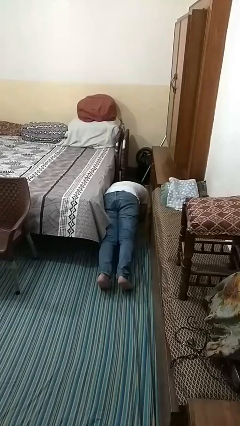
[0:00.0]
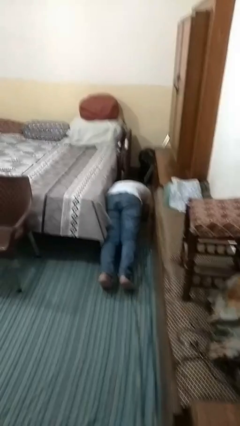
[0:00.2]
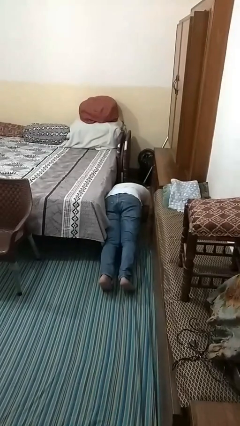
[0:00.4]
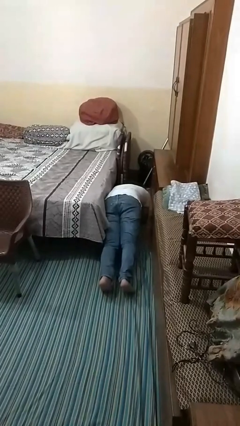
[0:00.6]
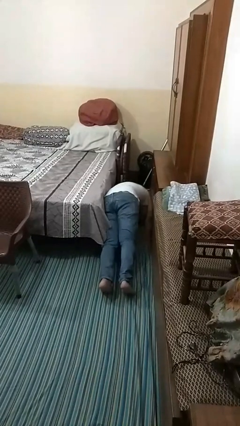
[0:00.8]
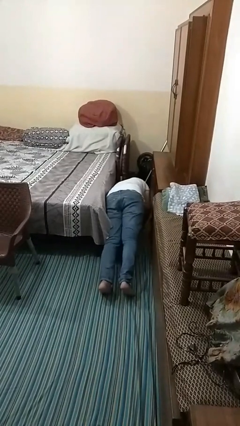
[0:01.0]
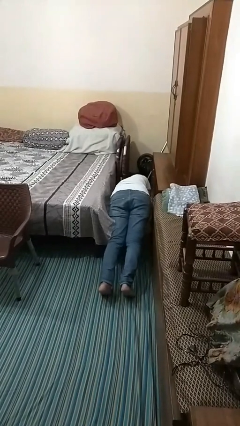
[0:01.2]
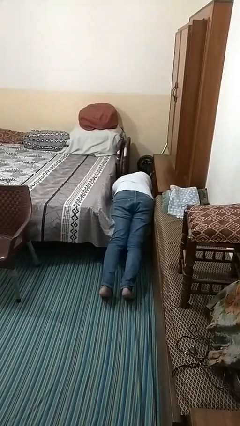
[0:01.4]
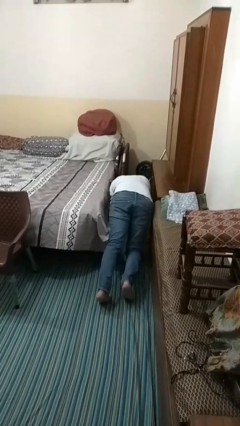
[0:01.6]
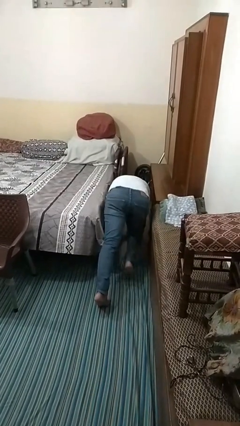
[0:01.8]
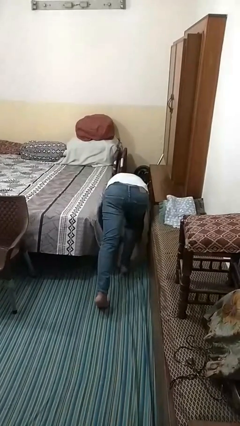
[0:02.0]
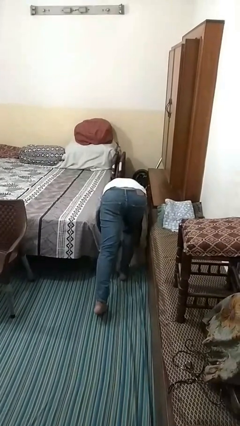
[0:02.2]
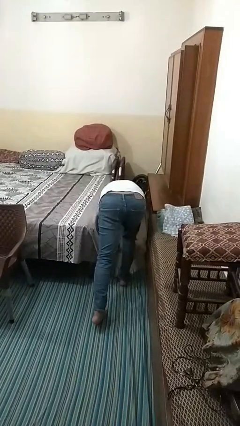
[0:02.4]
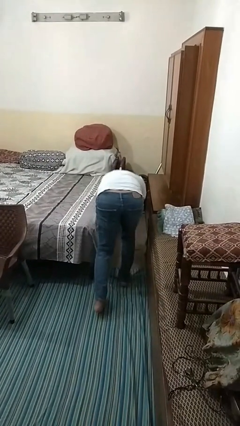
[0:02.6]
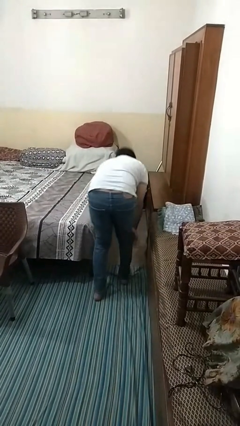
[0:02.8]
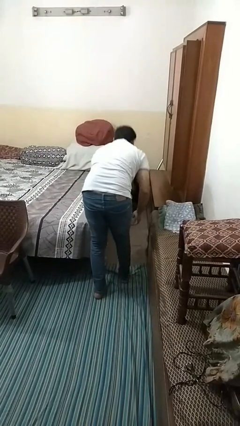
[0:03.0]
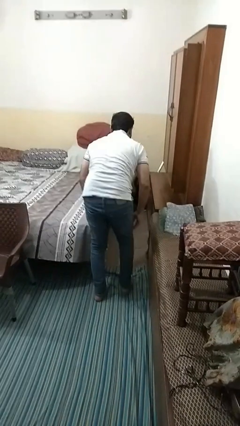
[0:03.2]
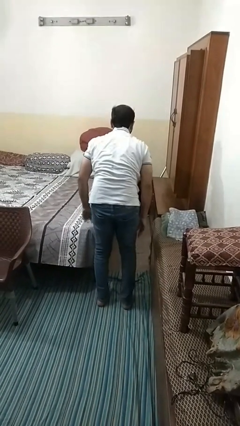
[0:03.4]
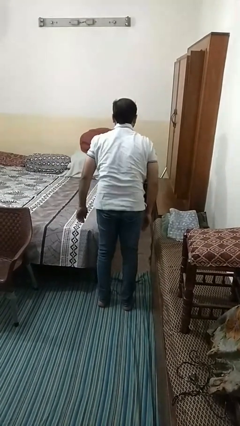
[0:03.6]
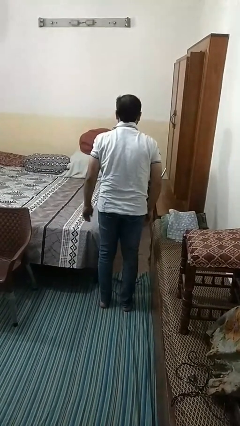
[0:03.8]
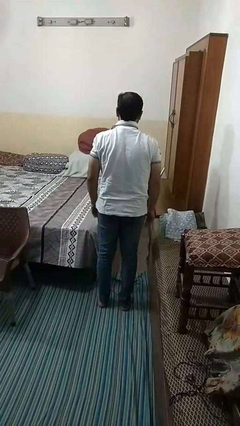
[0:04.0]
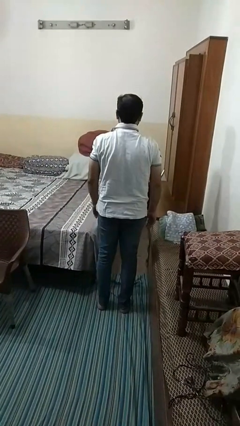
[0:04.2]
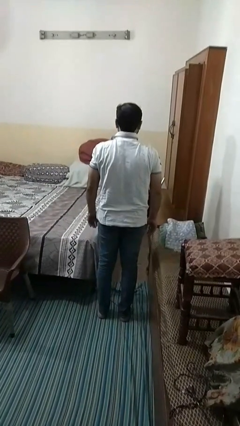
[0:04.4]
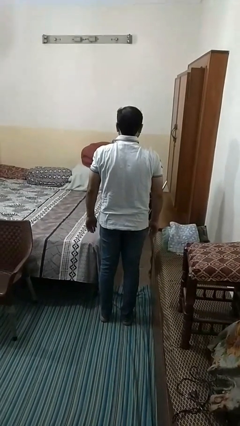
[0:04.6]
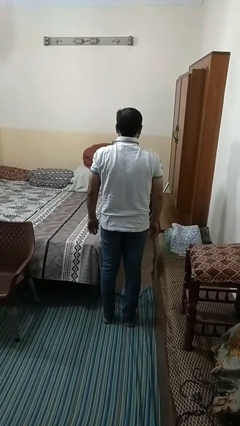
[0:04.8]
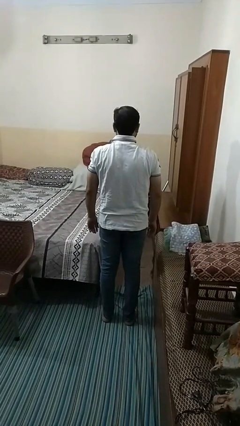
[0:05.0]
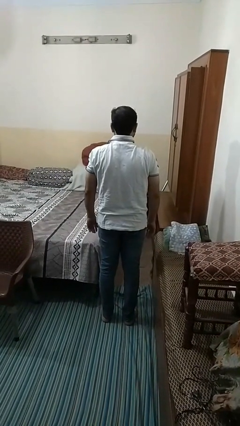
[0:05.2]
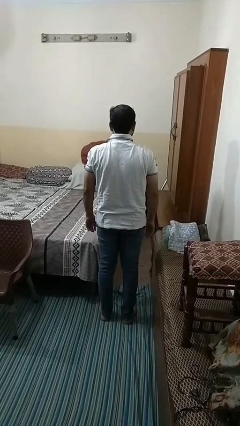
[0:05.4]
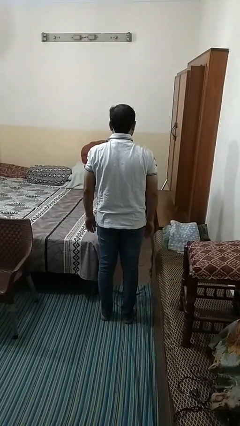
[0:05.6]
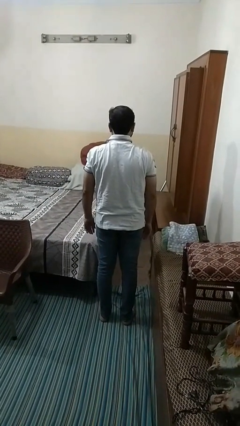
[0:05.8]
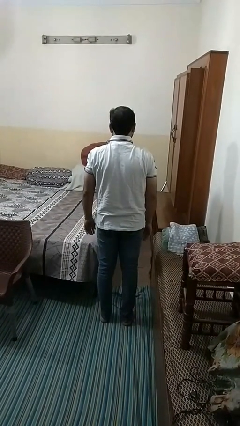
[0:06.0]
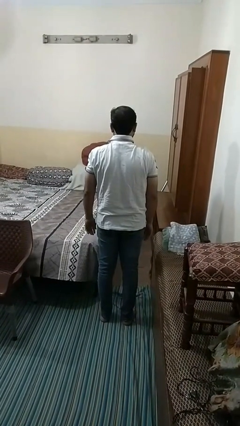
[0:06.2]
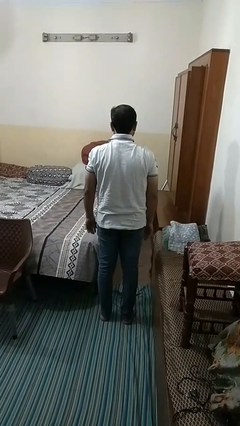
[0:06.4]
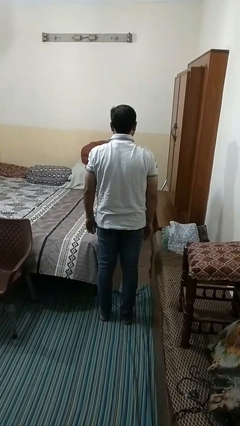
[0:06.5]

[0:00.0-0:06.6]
person stands up from floor

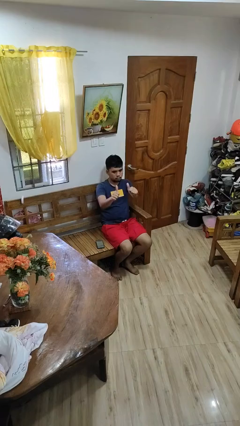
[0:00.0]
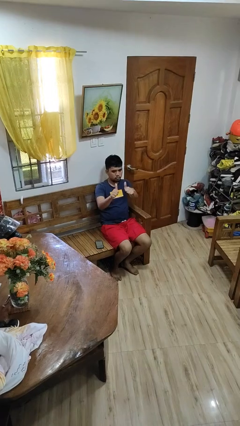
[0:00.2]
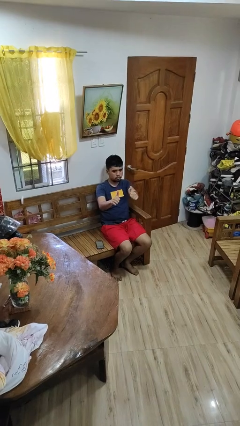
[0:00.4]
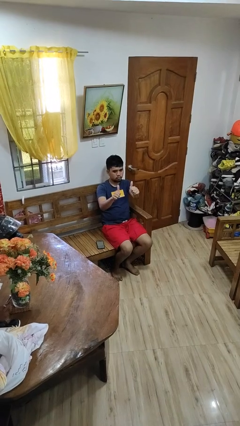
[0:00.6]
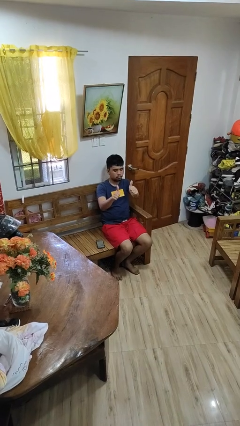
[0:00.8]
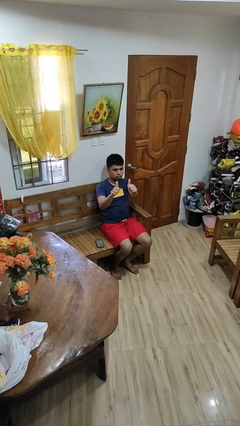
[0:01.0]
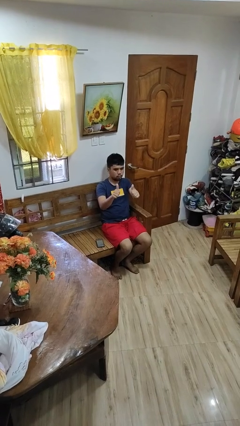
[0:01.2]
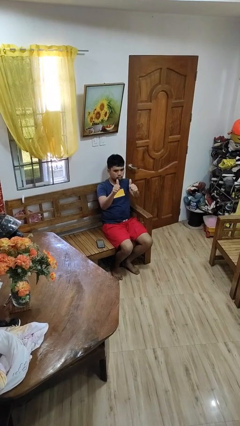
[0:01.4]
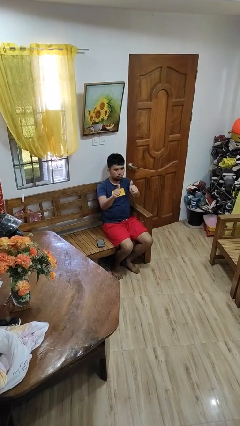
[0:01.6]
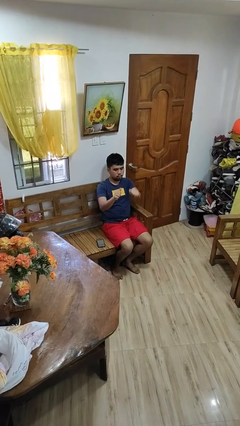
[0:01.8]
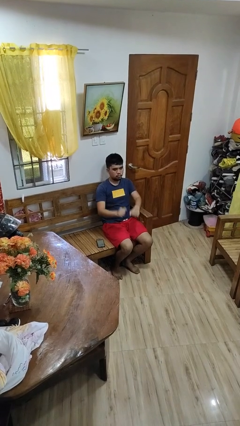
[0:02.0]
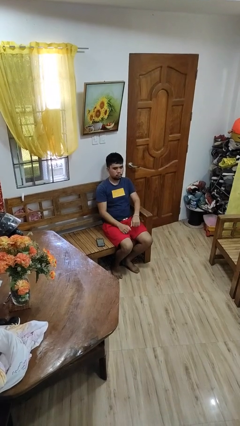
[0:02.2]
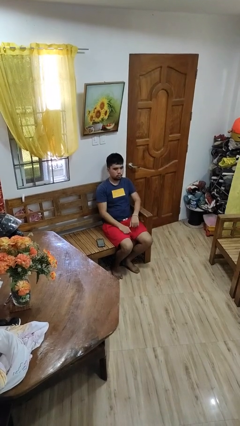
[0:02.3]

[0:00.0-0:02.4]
person gestures thumbs up

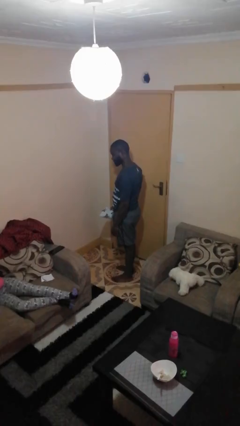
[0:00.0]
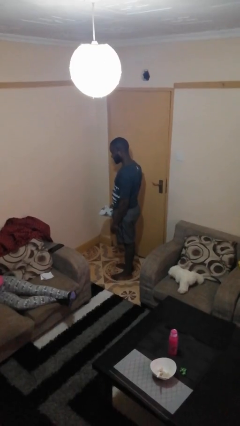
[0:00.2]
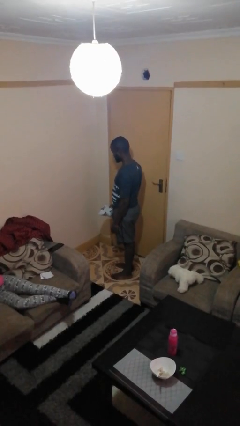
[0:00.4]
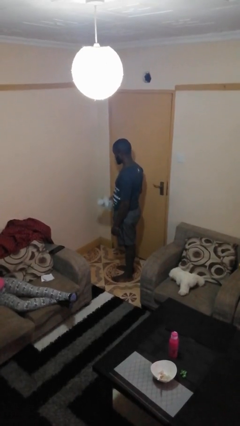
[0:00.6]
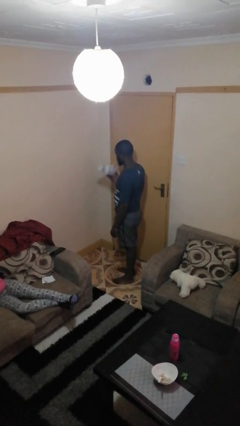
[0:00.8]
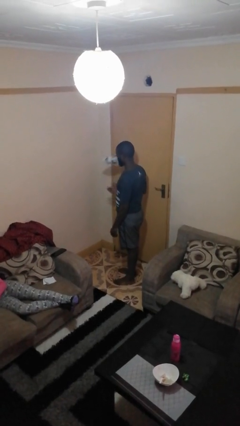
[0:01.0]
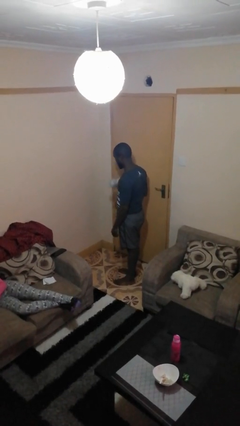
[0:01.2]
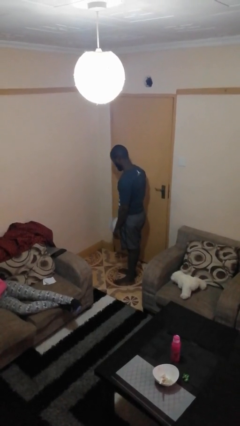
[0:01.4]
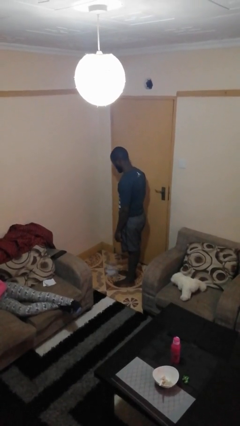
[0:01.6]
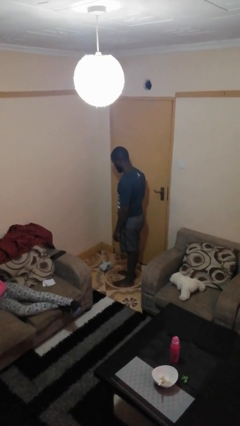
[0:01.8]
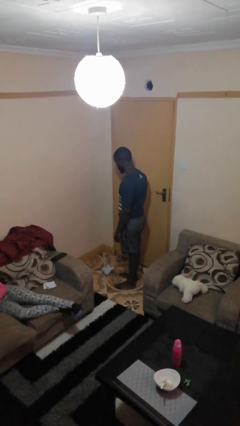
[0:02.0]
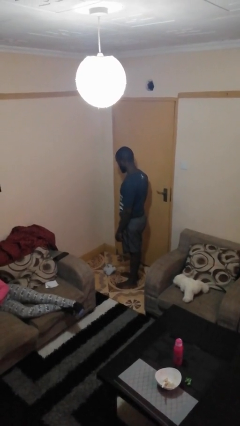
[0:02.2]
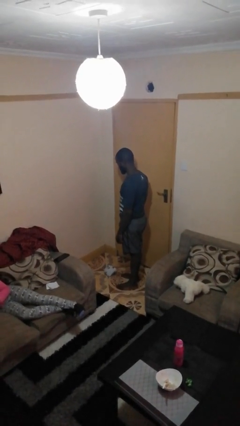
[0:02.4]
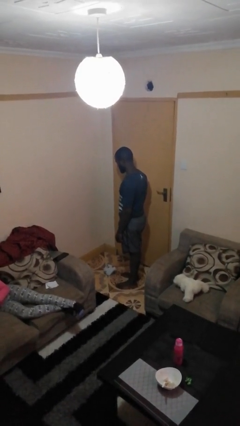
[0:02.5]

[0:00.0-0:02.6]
person throws object into air

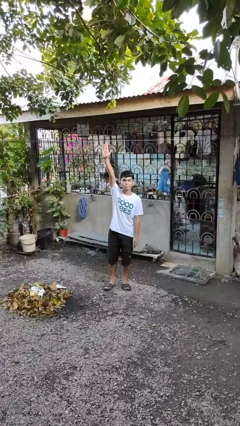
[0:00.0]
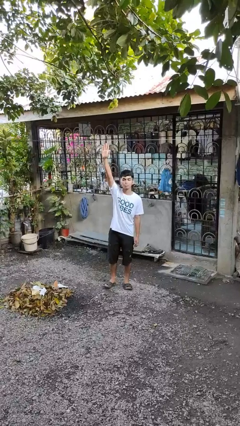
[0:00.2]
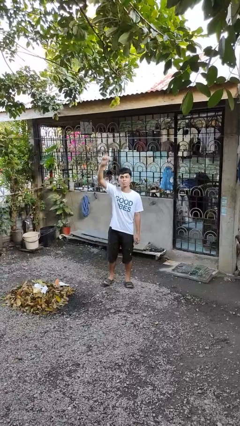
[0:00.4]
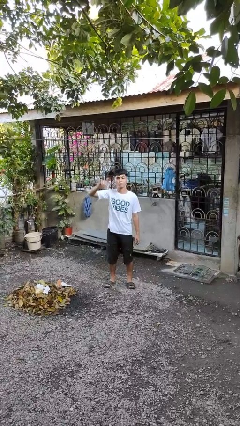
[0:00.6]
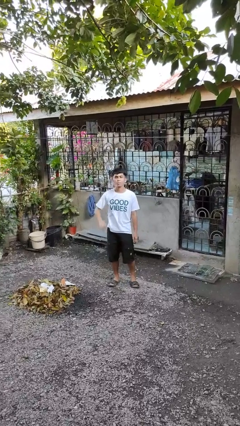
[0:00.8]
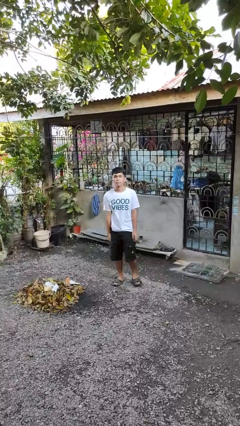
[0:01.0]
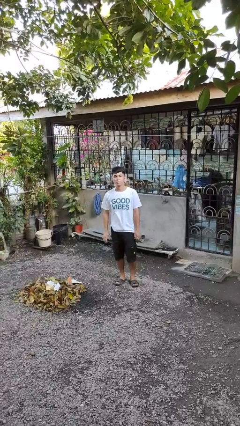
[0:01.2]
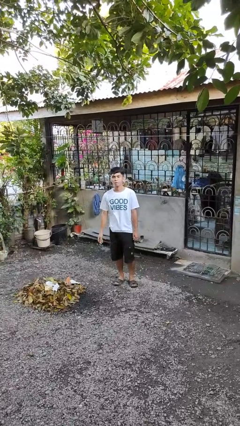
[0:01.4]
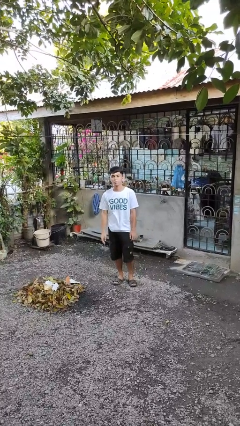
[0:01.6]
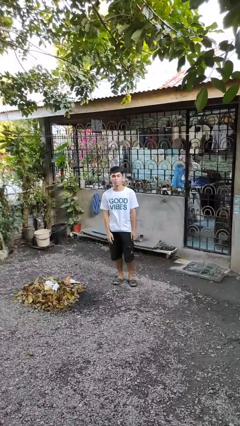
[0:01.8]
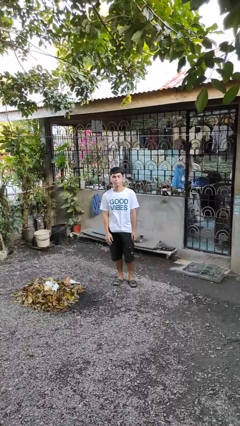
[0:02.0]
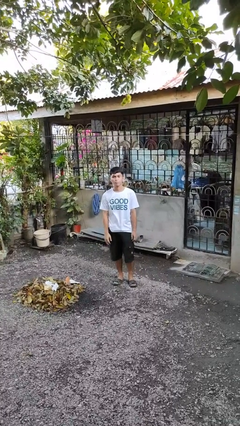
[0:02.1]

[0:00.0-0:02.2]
person gestures lower hand

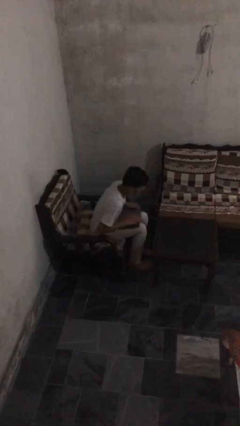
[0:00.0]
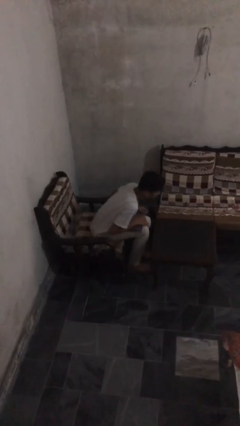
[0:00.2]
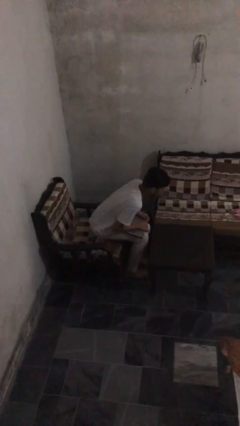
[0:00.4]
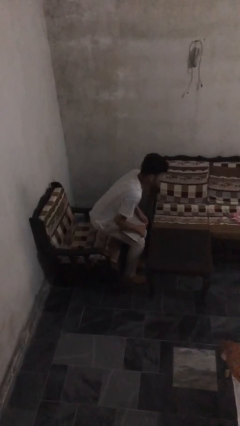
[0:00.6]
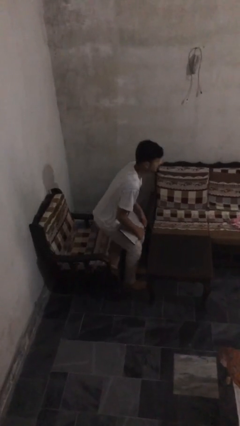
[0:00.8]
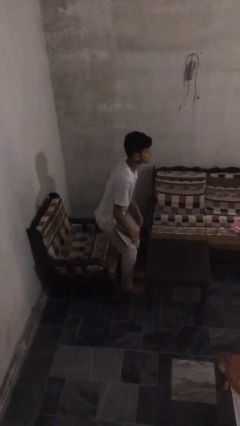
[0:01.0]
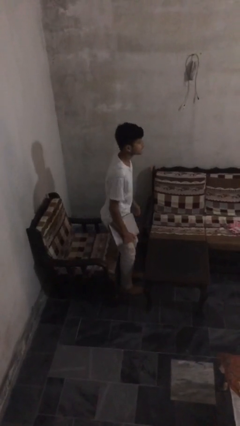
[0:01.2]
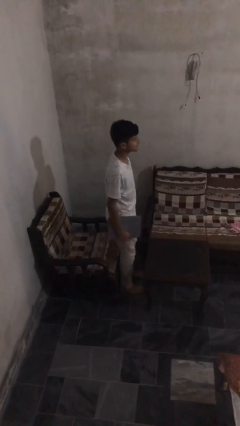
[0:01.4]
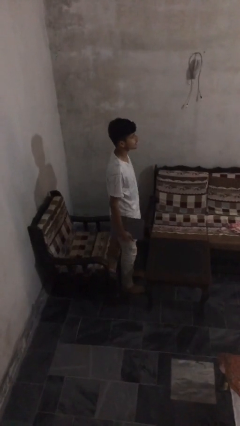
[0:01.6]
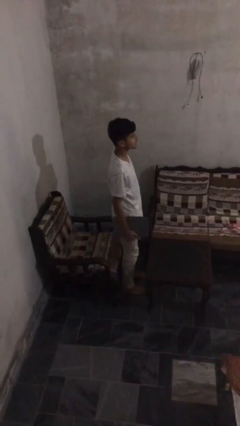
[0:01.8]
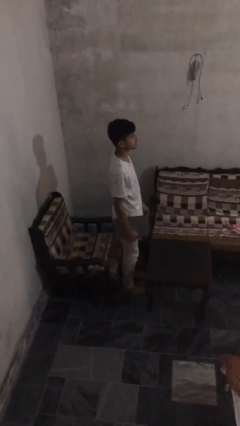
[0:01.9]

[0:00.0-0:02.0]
person stands up

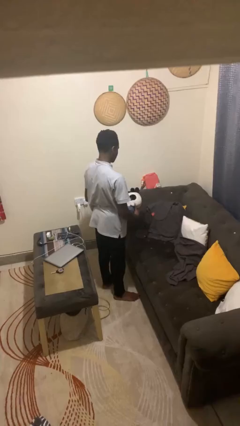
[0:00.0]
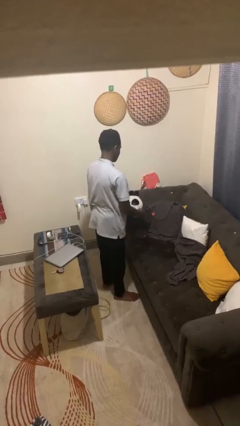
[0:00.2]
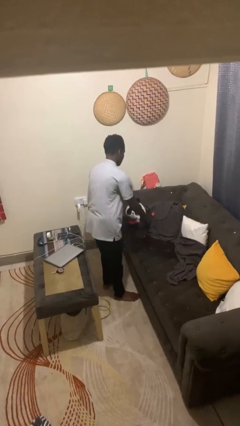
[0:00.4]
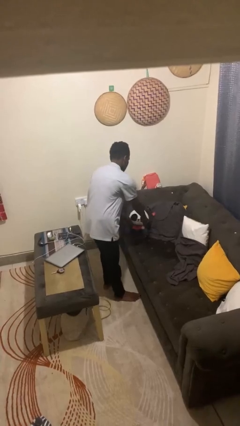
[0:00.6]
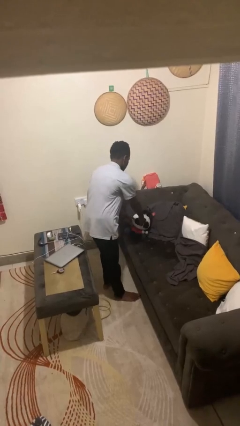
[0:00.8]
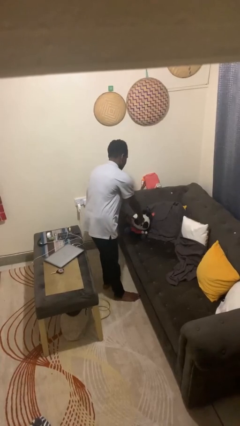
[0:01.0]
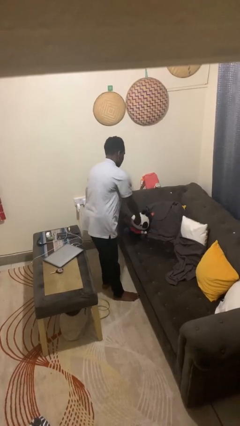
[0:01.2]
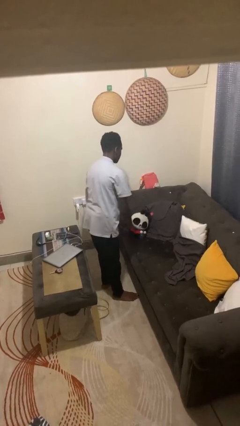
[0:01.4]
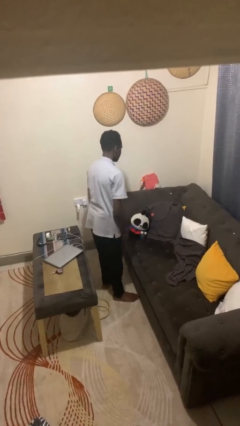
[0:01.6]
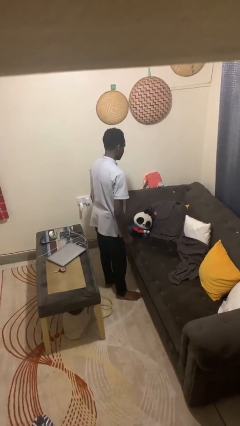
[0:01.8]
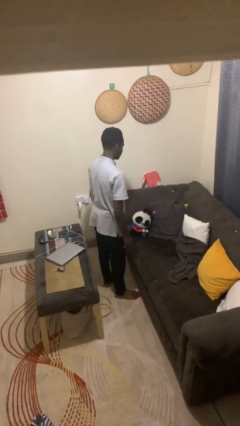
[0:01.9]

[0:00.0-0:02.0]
person puts down object on couch
